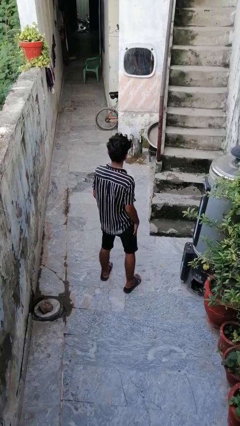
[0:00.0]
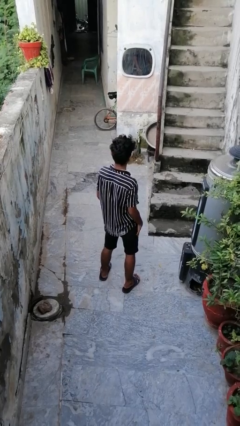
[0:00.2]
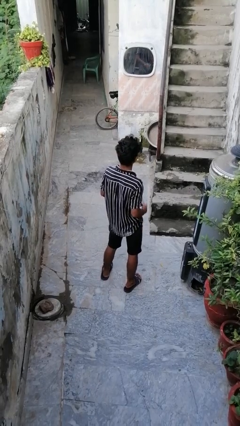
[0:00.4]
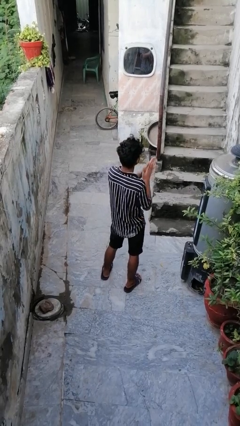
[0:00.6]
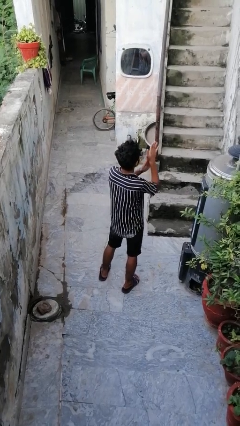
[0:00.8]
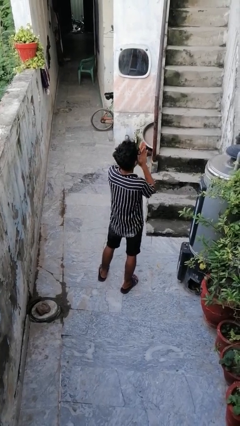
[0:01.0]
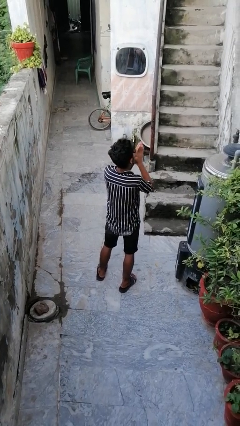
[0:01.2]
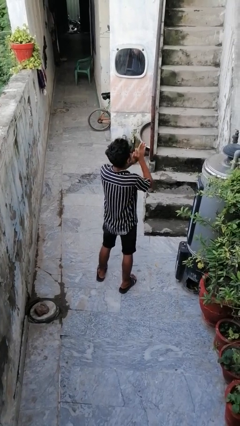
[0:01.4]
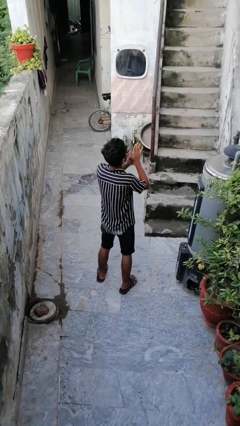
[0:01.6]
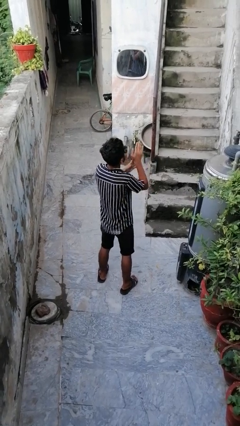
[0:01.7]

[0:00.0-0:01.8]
person blows into hands

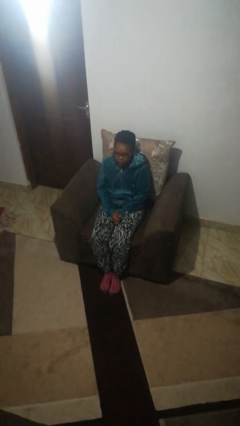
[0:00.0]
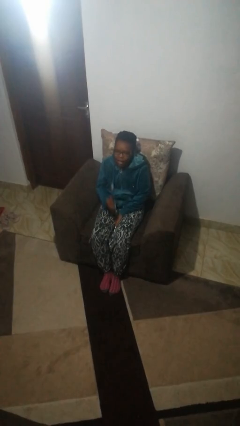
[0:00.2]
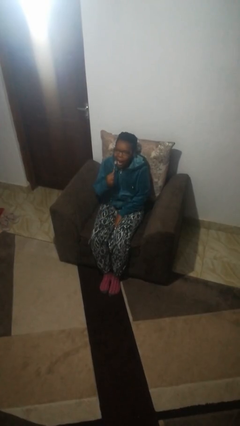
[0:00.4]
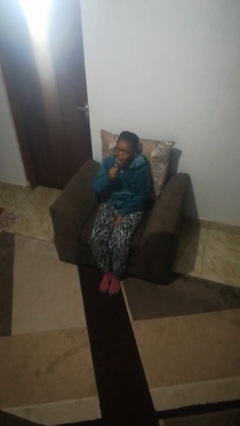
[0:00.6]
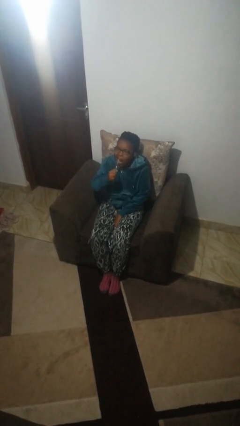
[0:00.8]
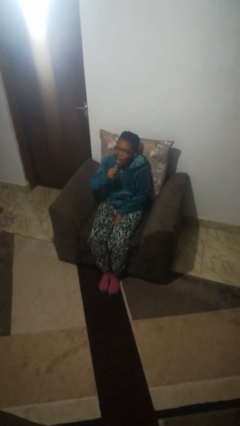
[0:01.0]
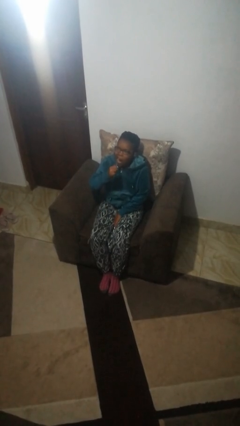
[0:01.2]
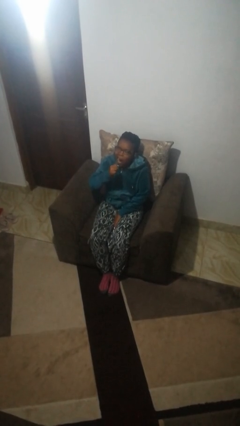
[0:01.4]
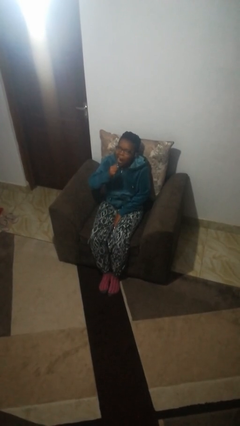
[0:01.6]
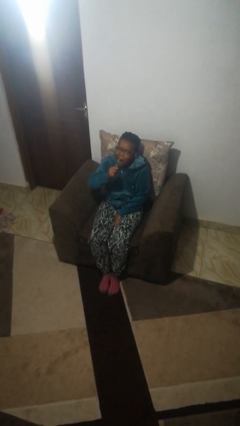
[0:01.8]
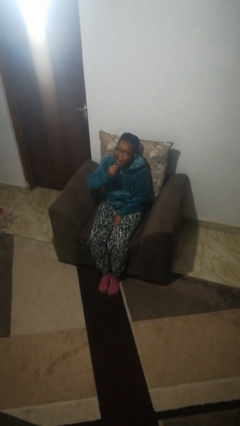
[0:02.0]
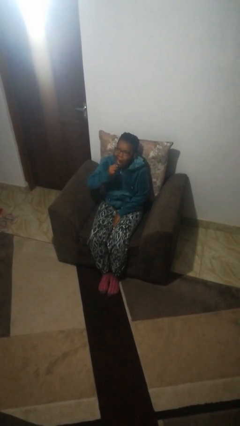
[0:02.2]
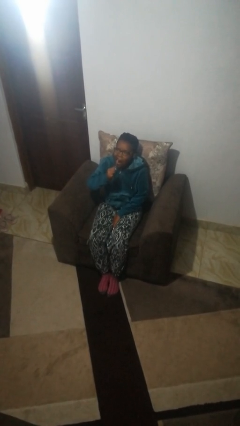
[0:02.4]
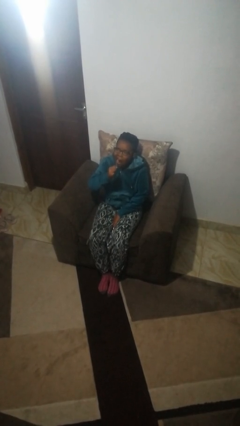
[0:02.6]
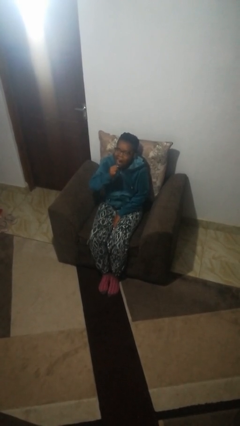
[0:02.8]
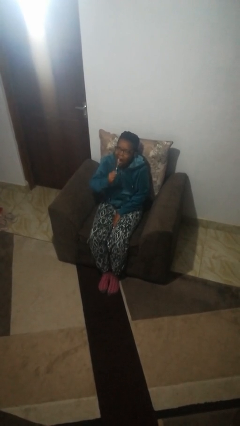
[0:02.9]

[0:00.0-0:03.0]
person brushes teeth

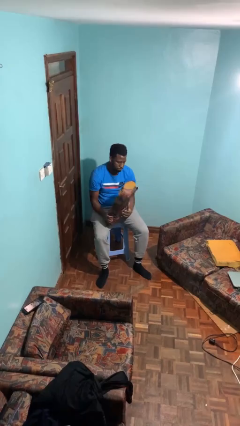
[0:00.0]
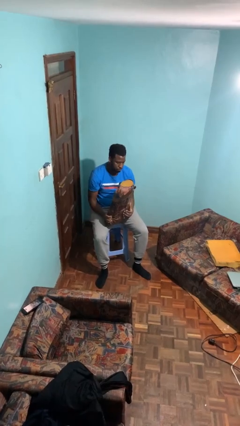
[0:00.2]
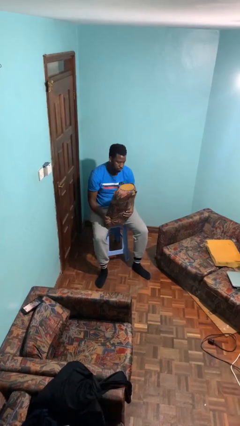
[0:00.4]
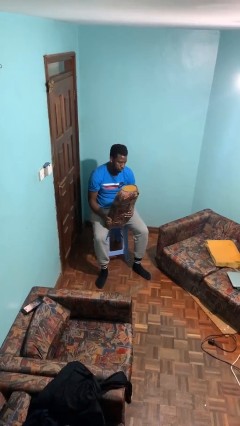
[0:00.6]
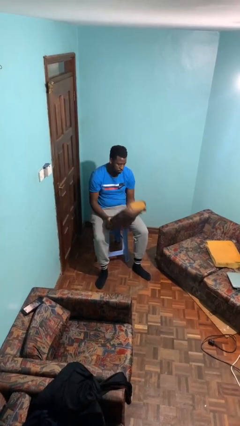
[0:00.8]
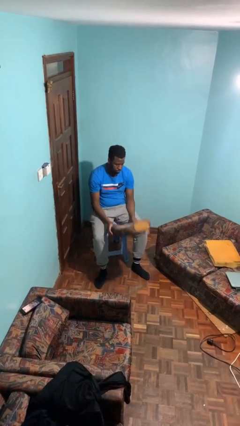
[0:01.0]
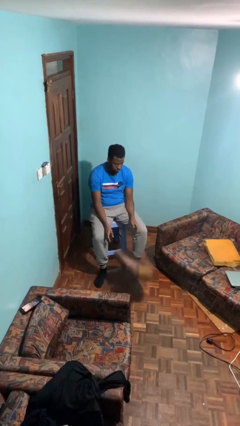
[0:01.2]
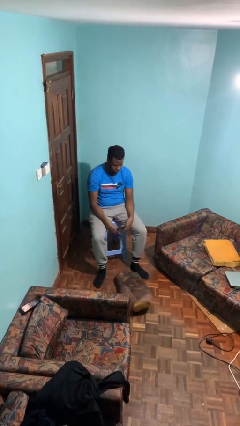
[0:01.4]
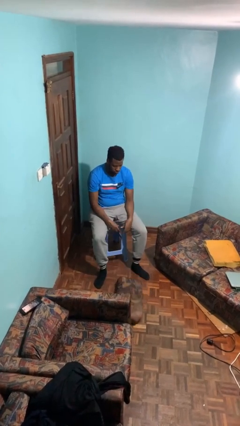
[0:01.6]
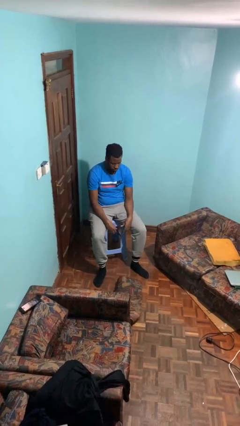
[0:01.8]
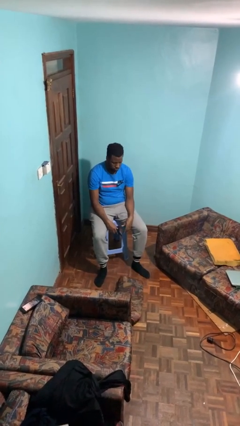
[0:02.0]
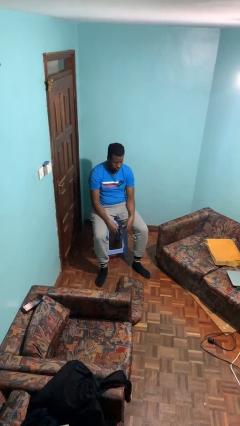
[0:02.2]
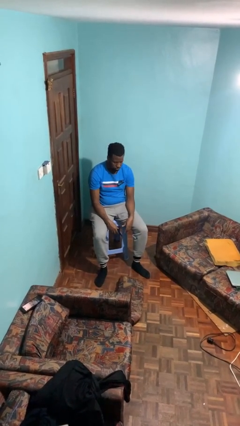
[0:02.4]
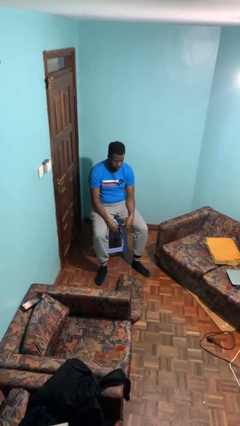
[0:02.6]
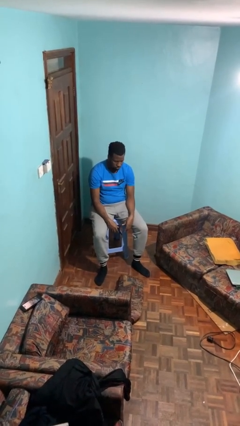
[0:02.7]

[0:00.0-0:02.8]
person drops object

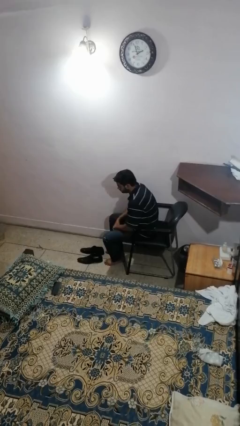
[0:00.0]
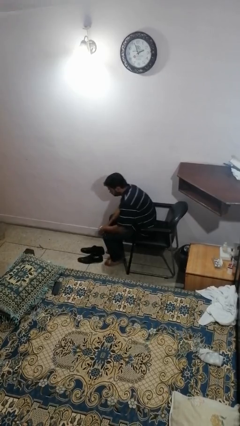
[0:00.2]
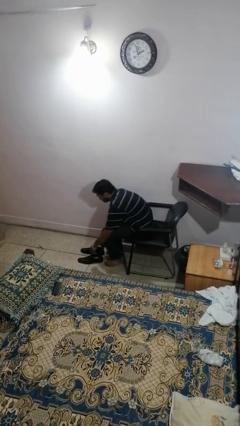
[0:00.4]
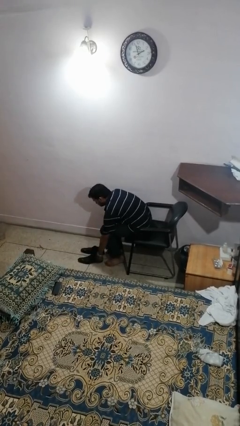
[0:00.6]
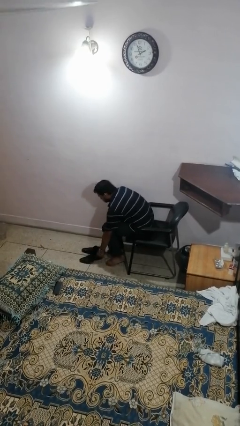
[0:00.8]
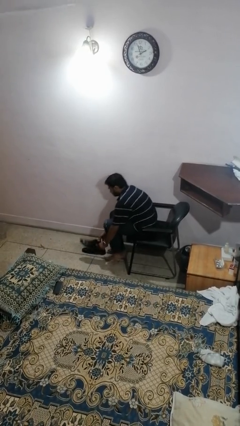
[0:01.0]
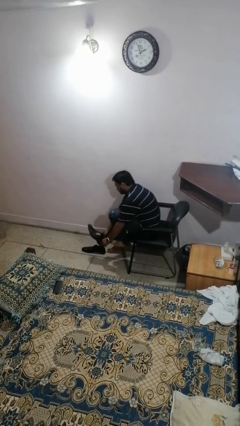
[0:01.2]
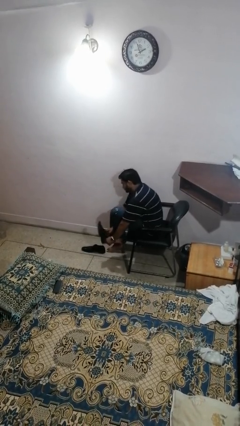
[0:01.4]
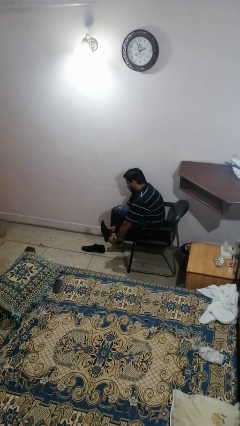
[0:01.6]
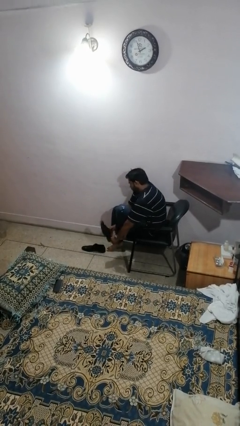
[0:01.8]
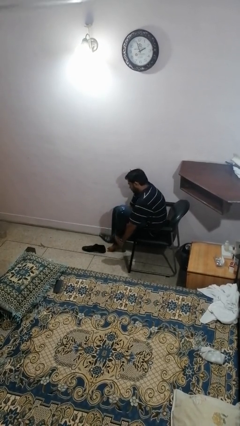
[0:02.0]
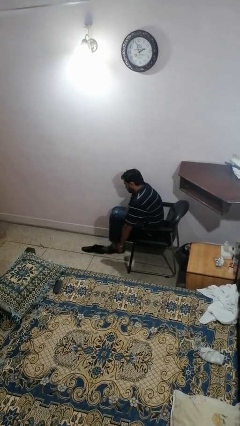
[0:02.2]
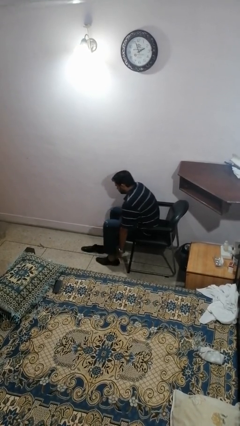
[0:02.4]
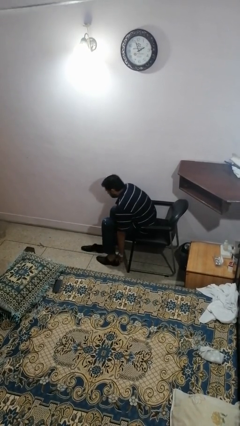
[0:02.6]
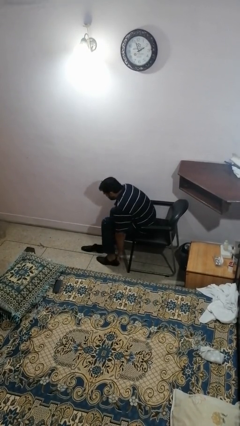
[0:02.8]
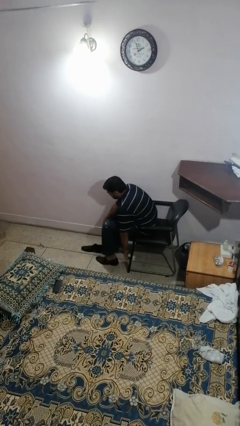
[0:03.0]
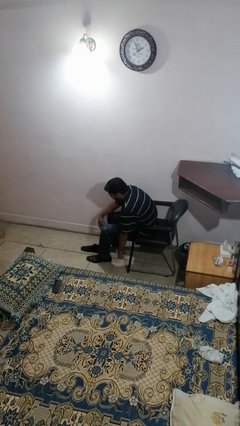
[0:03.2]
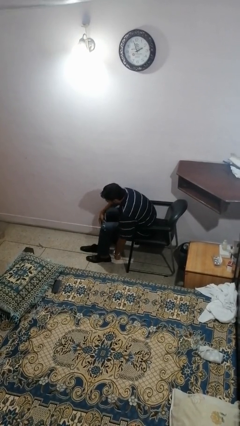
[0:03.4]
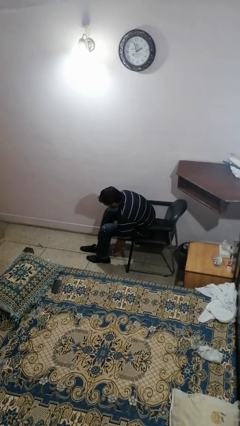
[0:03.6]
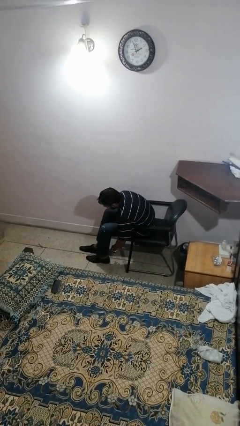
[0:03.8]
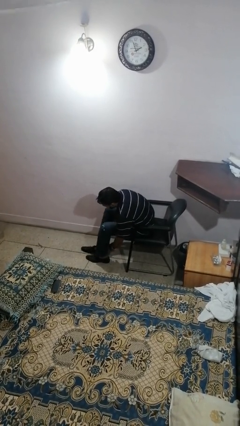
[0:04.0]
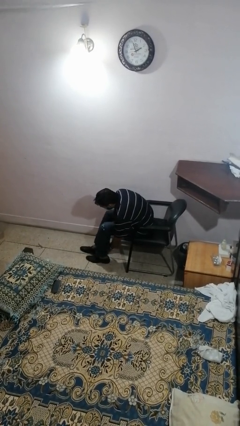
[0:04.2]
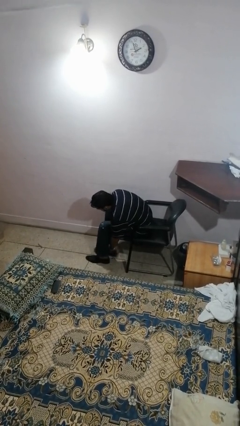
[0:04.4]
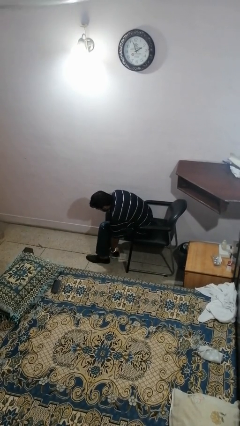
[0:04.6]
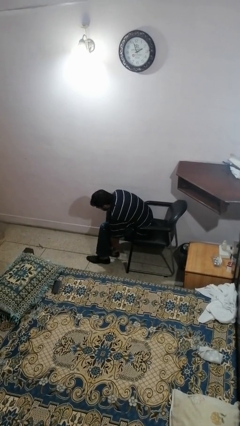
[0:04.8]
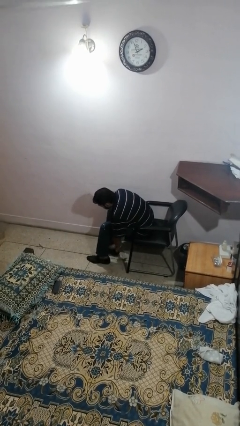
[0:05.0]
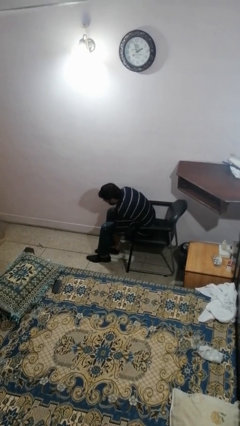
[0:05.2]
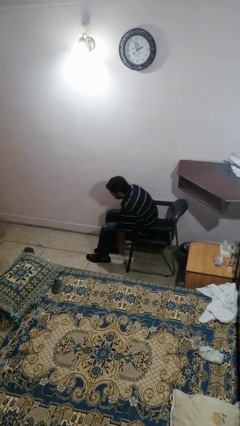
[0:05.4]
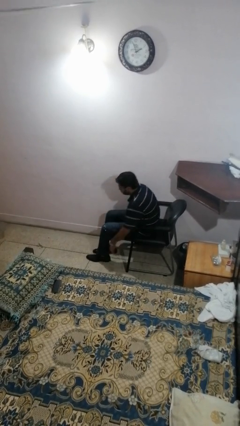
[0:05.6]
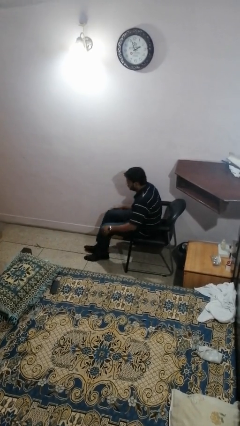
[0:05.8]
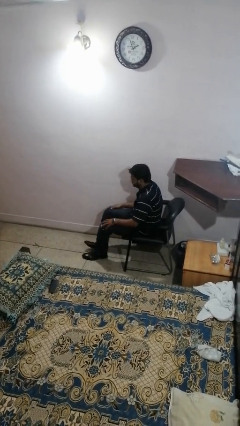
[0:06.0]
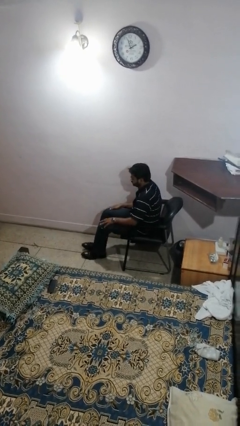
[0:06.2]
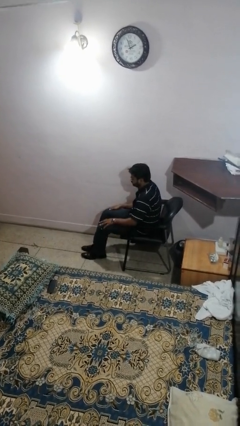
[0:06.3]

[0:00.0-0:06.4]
person puts on boots

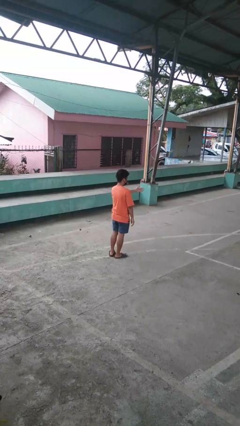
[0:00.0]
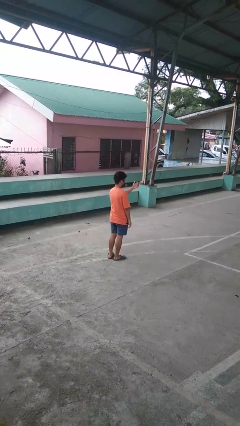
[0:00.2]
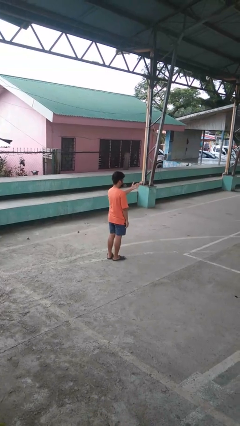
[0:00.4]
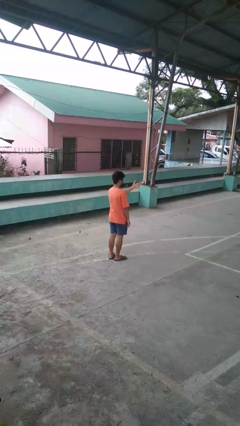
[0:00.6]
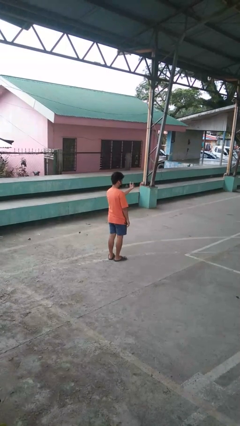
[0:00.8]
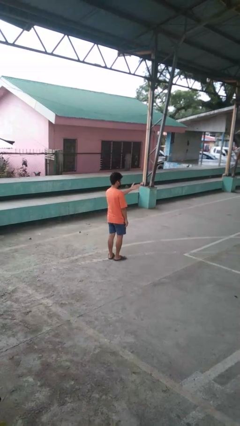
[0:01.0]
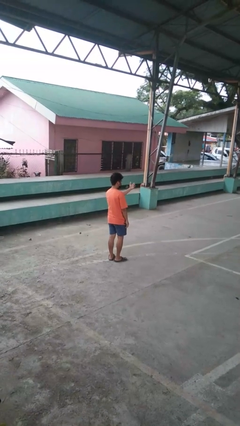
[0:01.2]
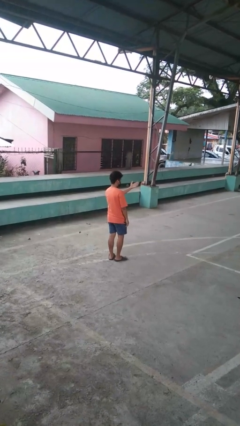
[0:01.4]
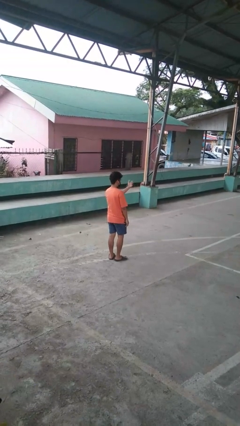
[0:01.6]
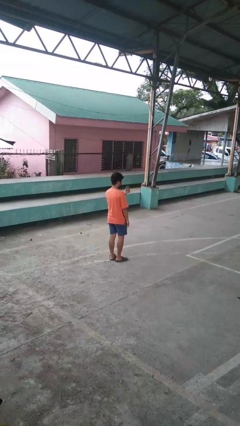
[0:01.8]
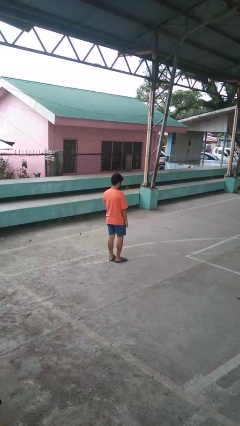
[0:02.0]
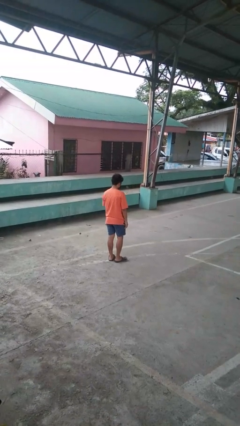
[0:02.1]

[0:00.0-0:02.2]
person gestures come here

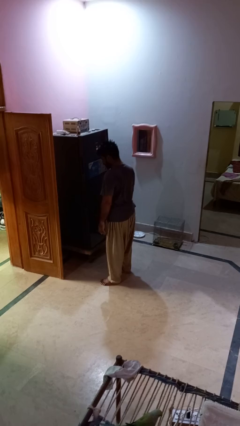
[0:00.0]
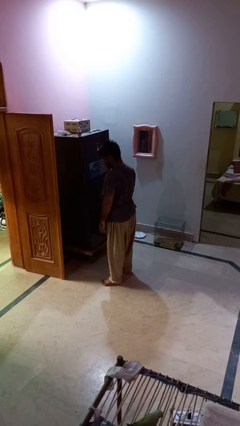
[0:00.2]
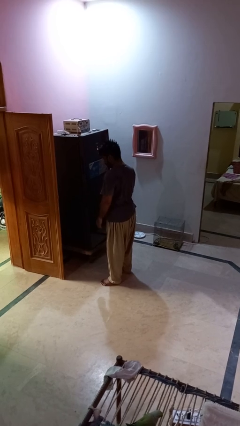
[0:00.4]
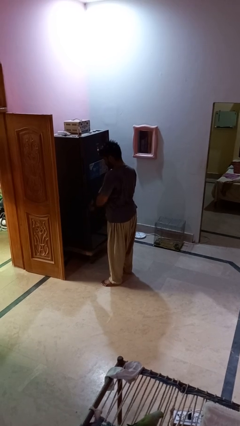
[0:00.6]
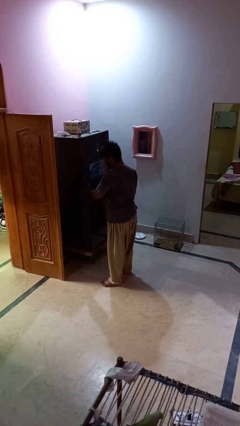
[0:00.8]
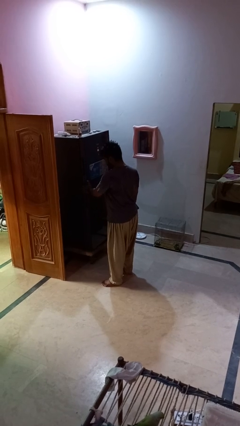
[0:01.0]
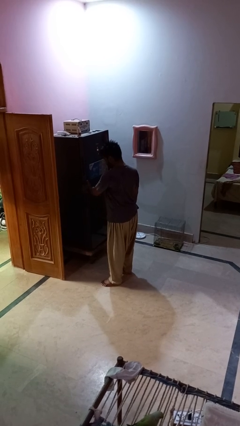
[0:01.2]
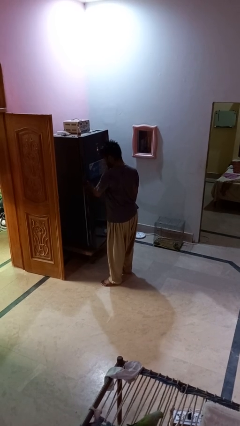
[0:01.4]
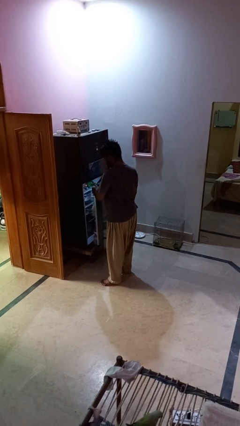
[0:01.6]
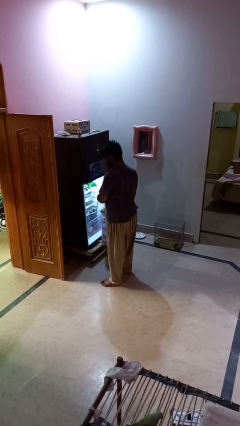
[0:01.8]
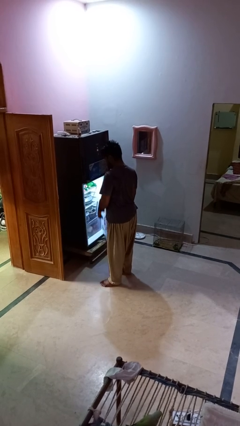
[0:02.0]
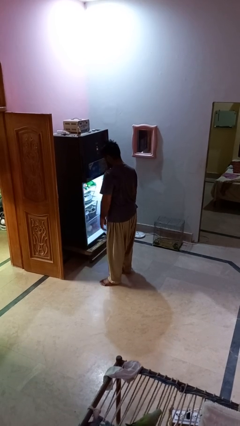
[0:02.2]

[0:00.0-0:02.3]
person opens refrigerator
